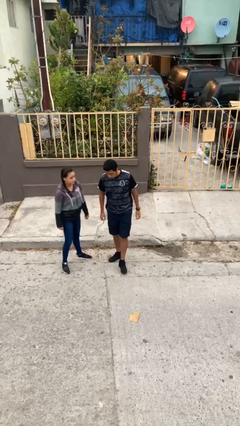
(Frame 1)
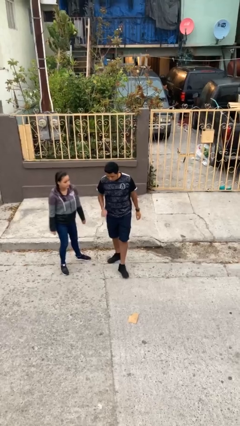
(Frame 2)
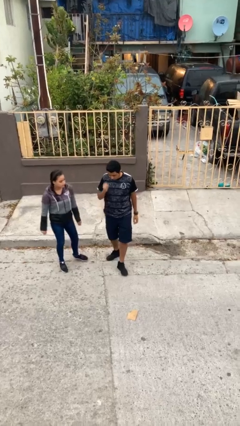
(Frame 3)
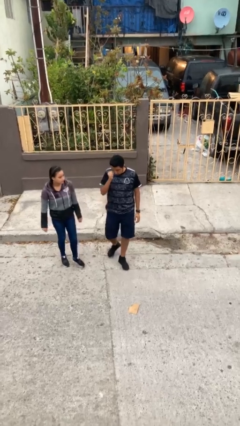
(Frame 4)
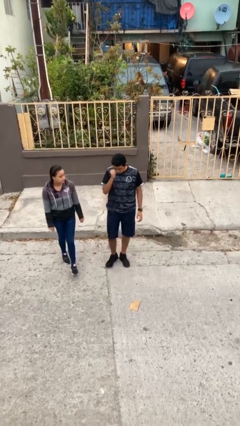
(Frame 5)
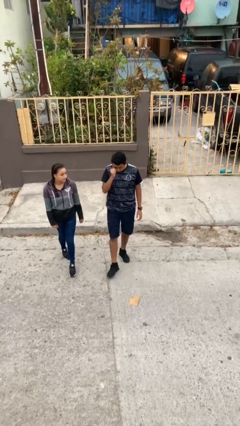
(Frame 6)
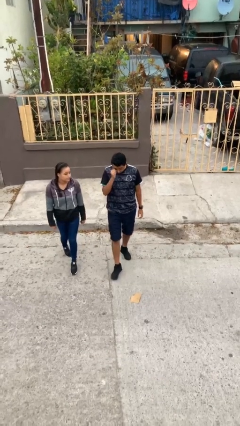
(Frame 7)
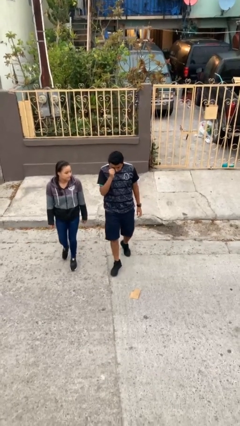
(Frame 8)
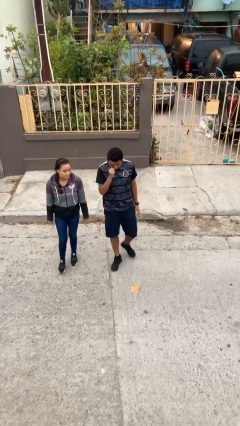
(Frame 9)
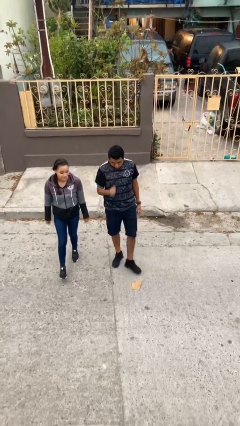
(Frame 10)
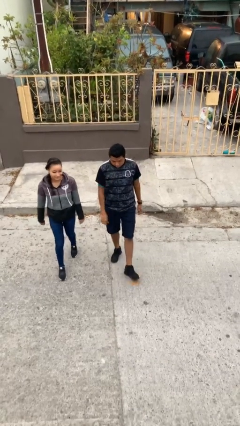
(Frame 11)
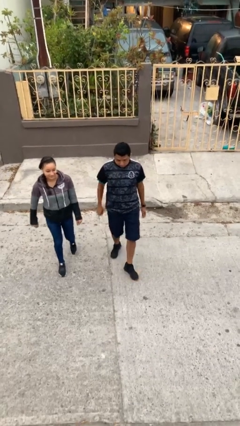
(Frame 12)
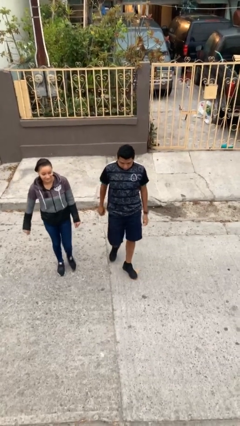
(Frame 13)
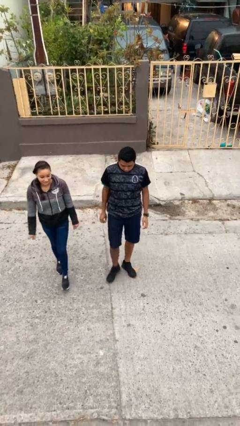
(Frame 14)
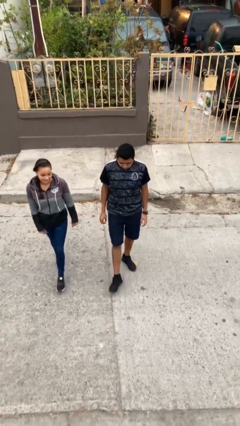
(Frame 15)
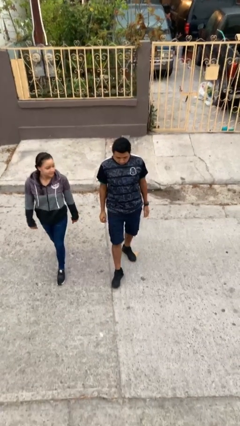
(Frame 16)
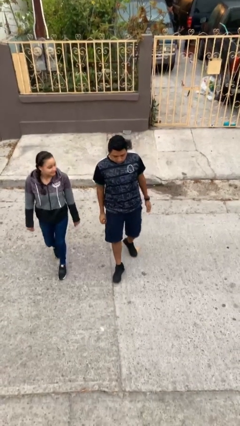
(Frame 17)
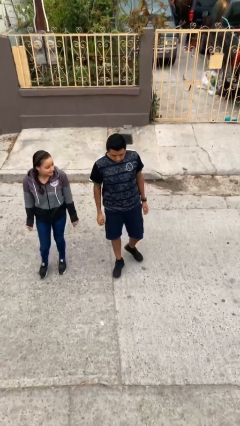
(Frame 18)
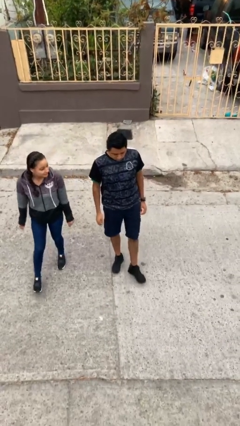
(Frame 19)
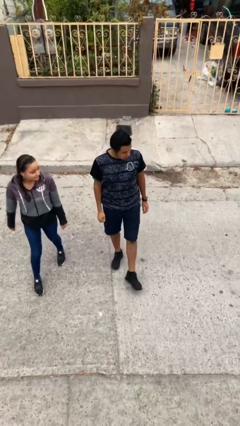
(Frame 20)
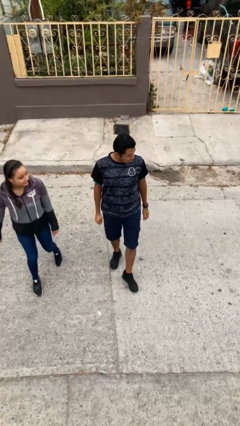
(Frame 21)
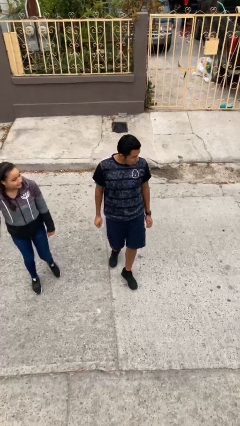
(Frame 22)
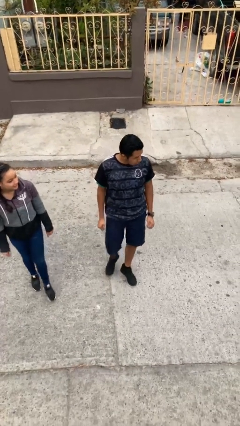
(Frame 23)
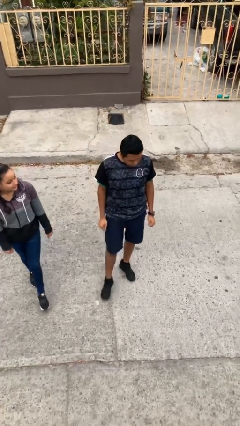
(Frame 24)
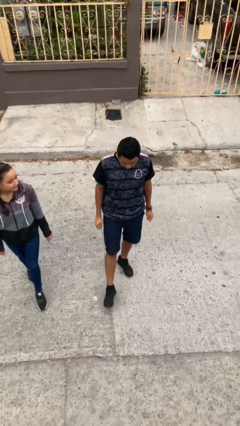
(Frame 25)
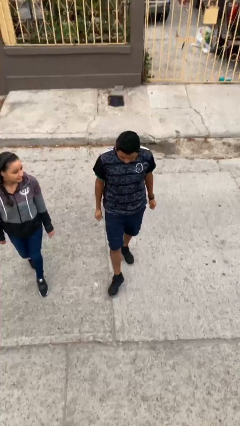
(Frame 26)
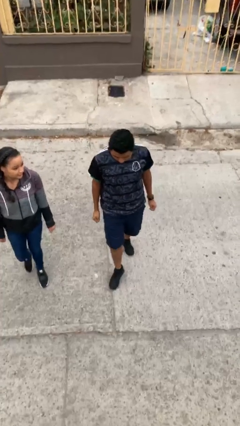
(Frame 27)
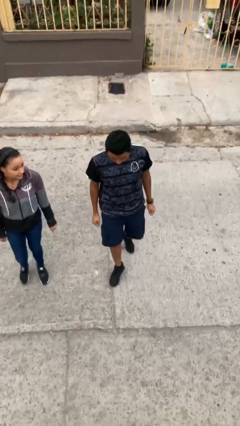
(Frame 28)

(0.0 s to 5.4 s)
person talks to person

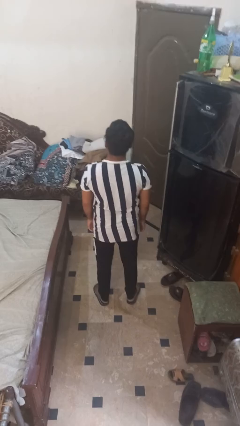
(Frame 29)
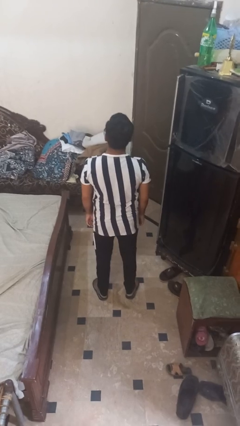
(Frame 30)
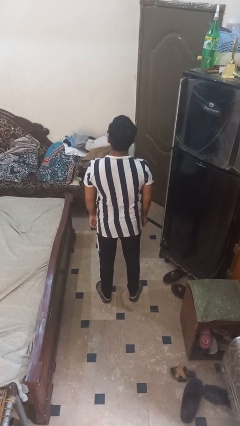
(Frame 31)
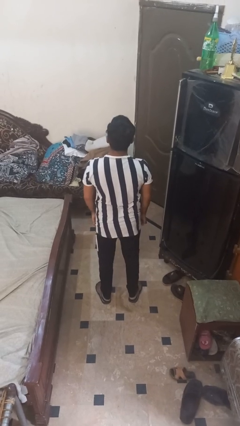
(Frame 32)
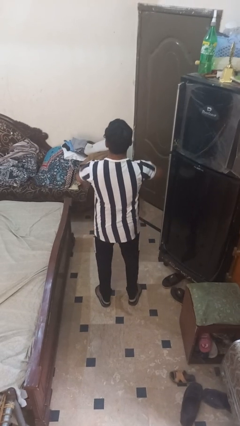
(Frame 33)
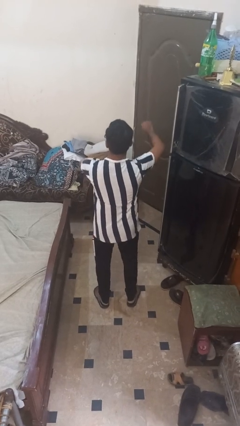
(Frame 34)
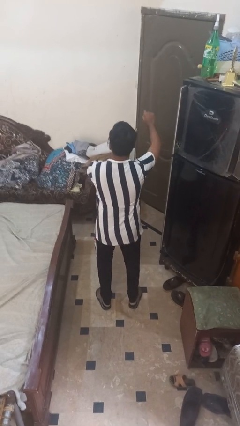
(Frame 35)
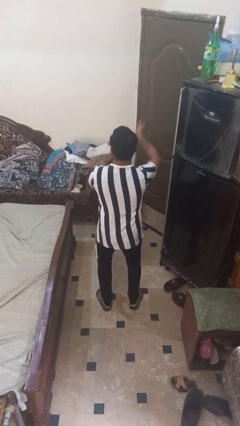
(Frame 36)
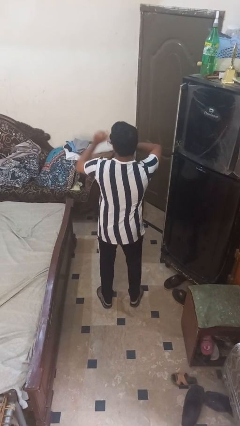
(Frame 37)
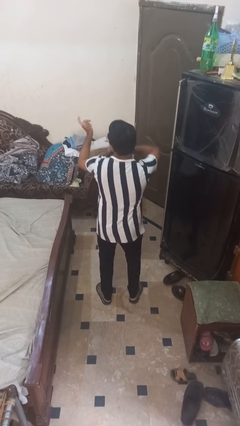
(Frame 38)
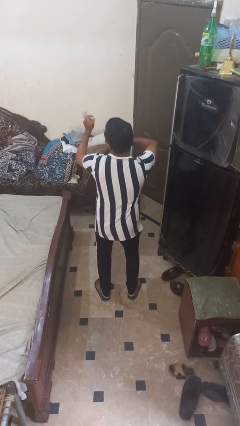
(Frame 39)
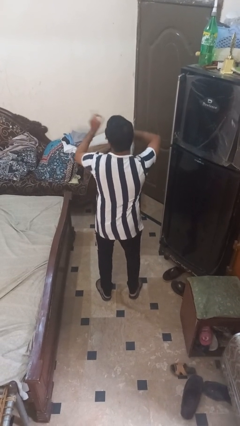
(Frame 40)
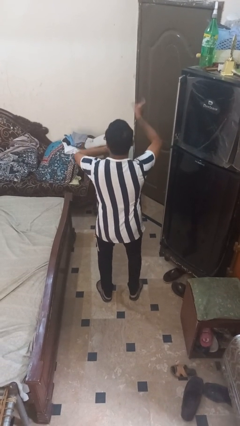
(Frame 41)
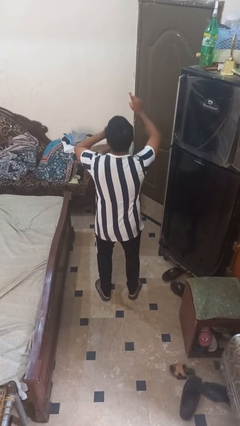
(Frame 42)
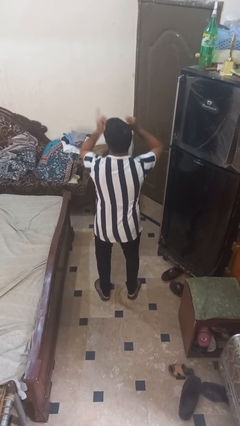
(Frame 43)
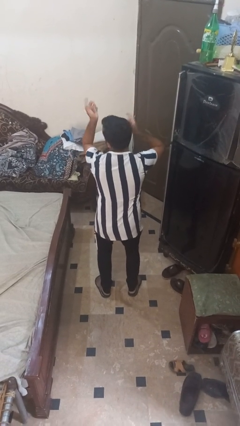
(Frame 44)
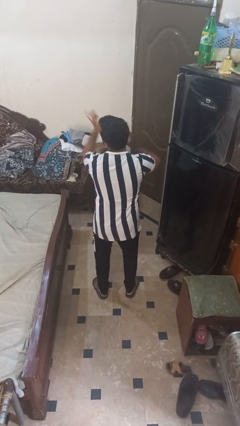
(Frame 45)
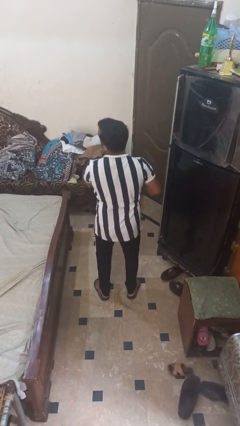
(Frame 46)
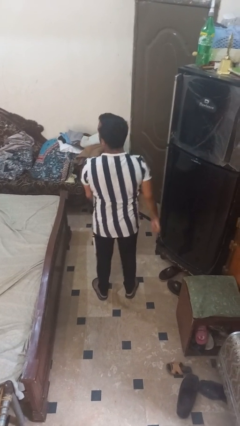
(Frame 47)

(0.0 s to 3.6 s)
person dances in place

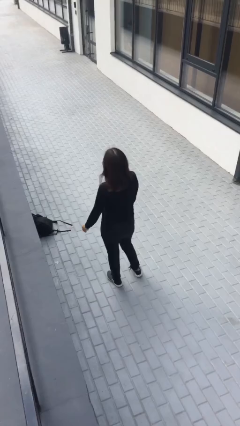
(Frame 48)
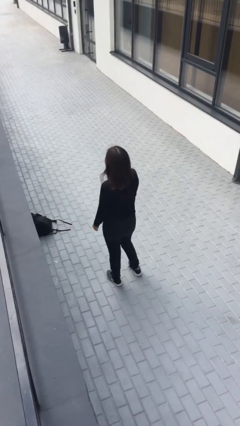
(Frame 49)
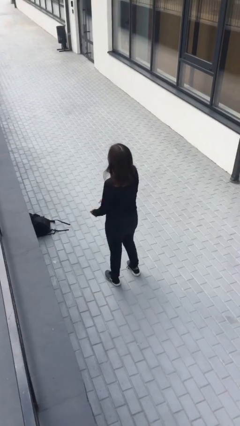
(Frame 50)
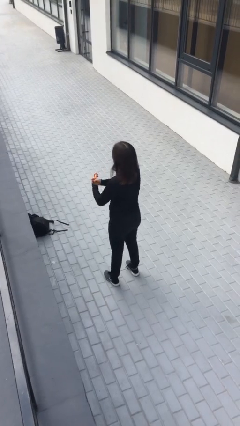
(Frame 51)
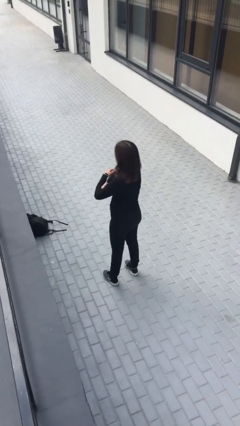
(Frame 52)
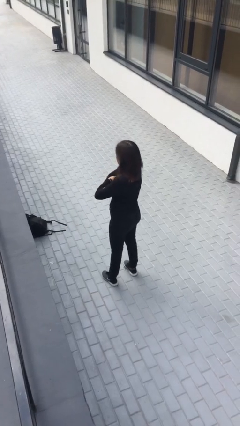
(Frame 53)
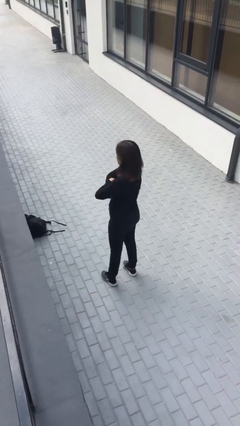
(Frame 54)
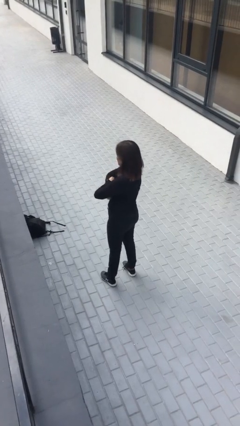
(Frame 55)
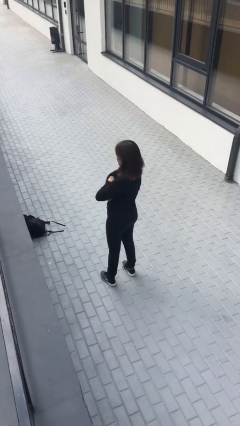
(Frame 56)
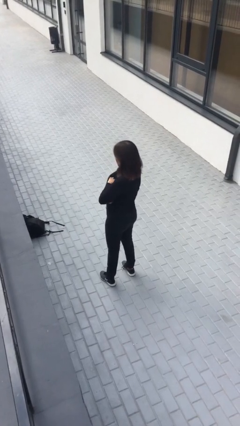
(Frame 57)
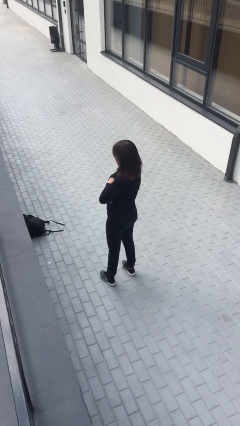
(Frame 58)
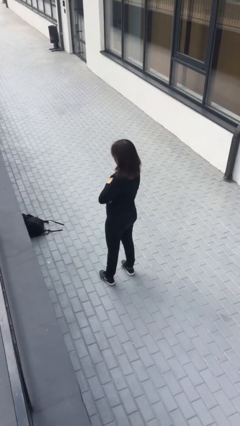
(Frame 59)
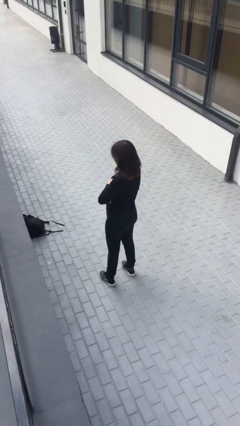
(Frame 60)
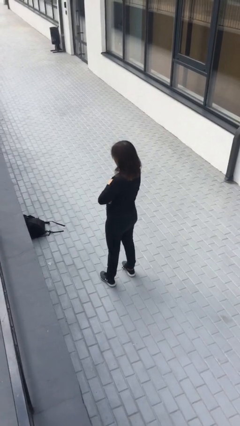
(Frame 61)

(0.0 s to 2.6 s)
person crosses arms

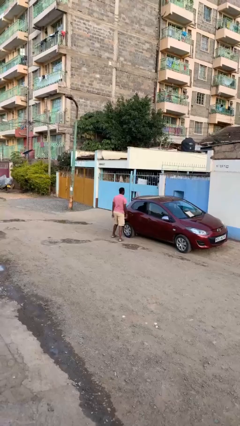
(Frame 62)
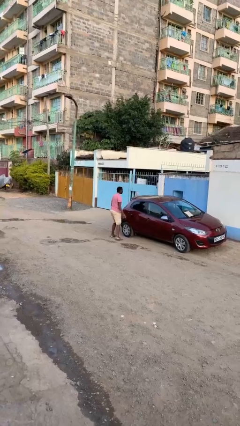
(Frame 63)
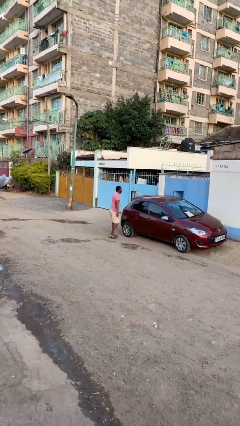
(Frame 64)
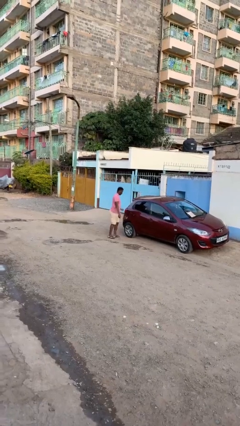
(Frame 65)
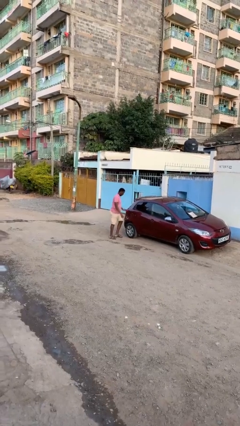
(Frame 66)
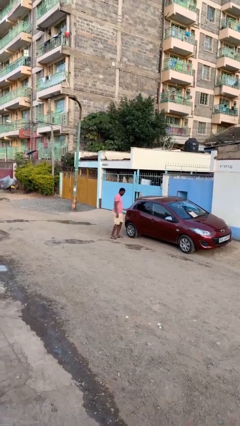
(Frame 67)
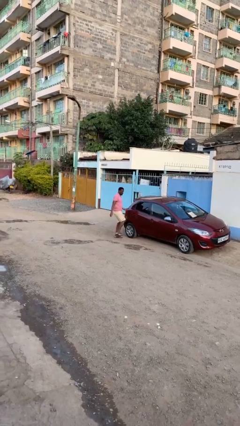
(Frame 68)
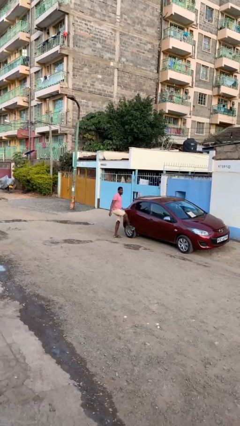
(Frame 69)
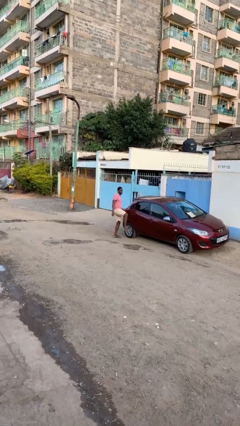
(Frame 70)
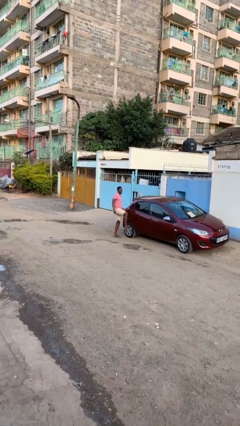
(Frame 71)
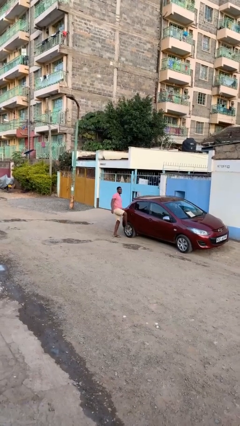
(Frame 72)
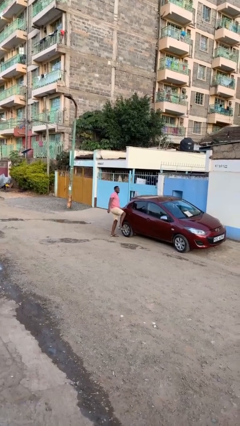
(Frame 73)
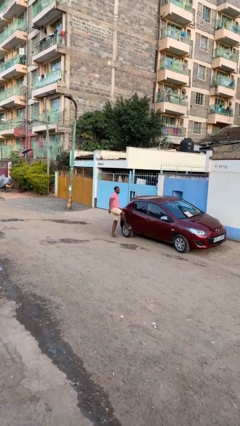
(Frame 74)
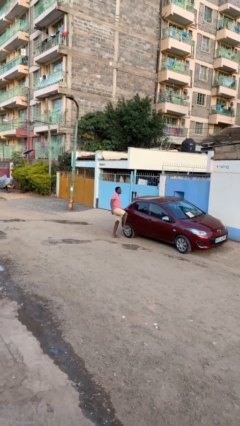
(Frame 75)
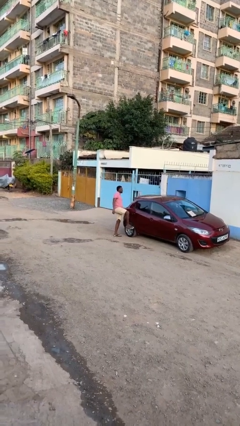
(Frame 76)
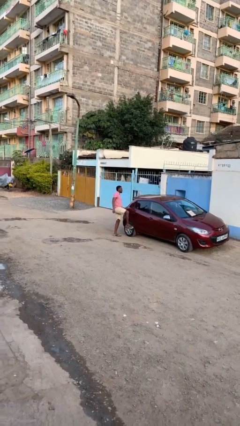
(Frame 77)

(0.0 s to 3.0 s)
person kicks car tires

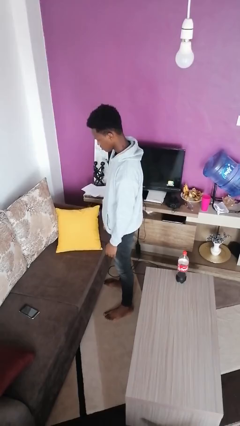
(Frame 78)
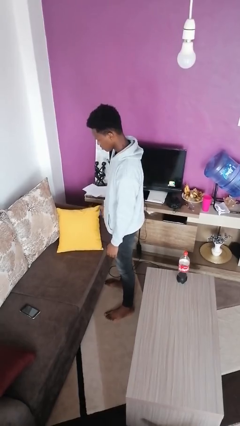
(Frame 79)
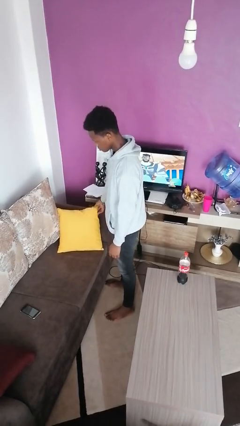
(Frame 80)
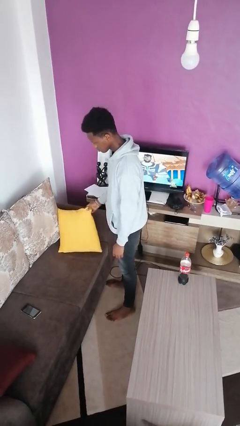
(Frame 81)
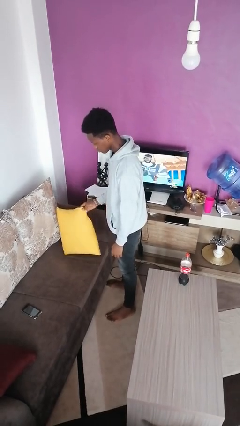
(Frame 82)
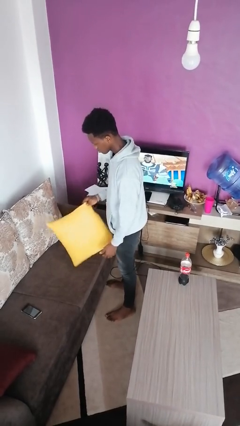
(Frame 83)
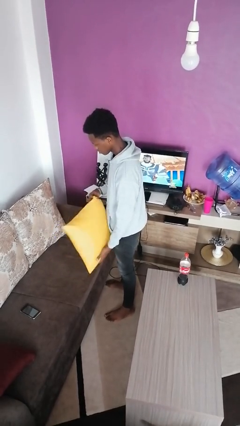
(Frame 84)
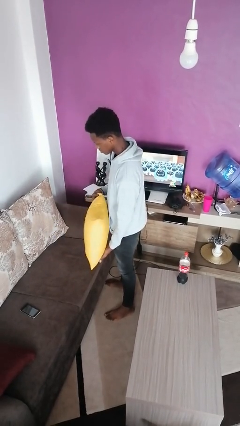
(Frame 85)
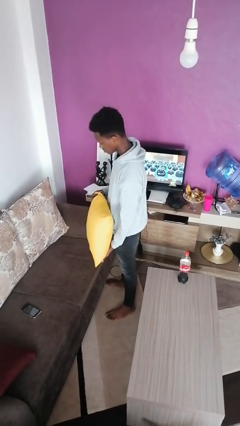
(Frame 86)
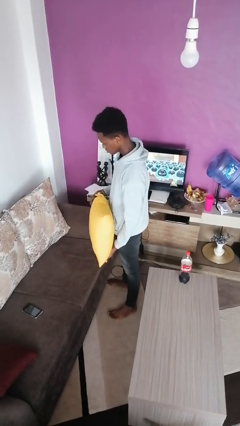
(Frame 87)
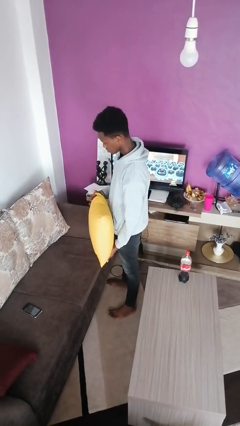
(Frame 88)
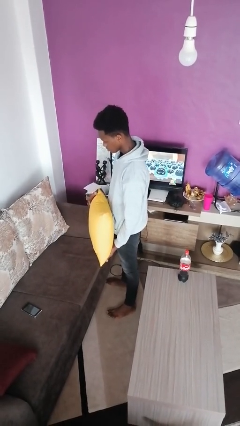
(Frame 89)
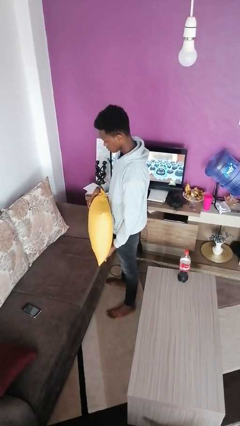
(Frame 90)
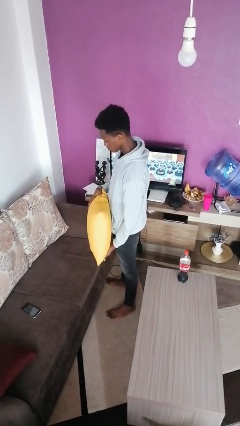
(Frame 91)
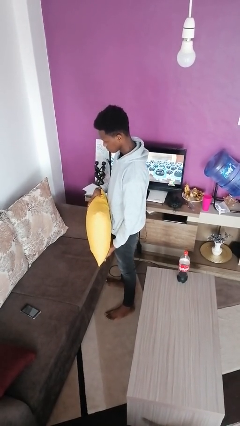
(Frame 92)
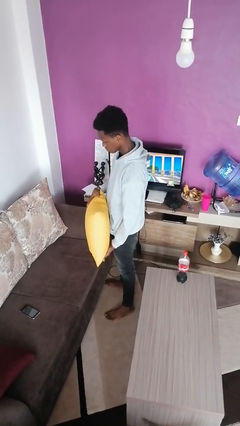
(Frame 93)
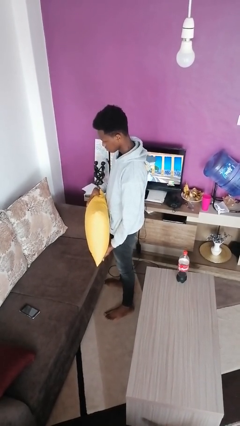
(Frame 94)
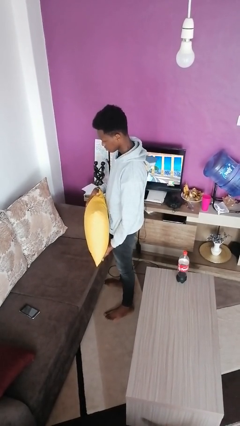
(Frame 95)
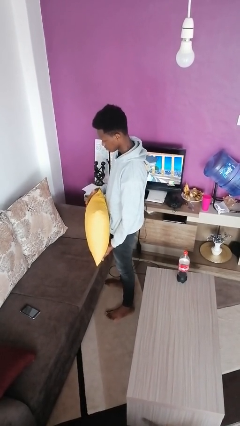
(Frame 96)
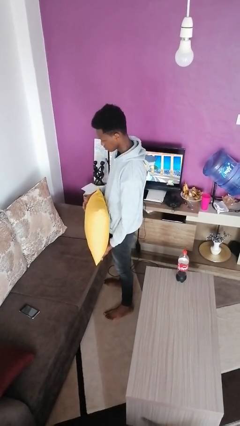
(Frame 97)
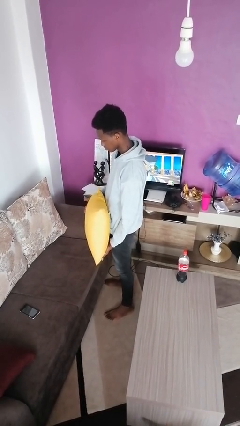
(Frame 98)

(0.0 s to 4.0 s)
person picks up object from couch
